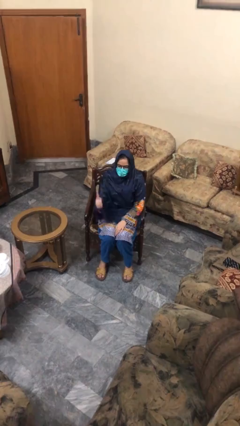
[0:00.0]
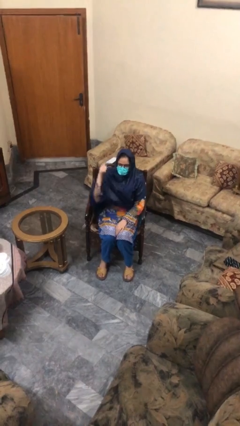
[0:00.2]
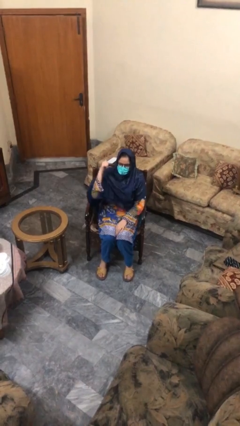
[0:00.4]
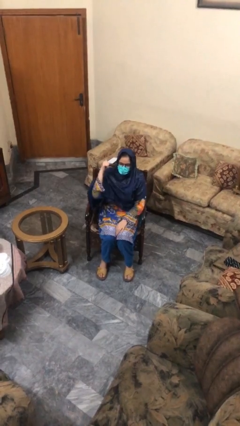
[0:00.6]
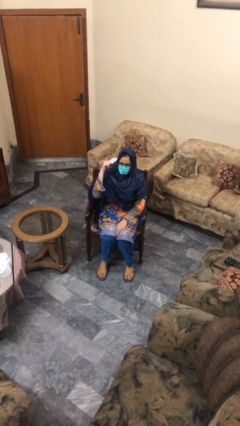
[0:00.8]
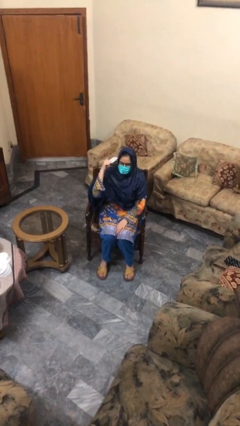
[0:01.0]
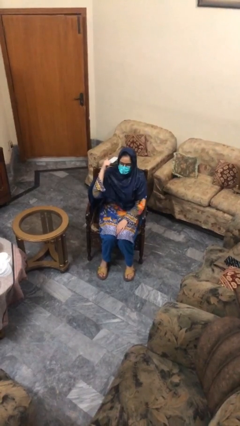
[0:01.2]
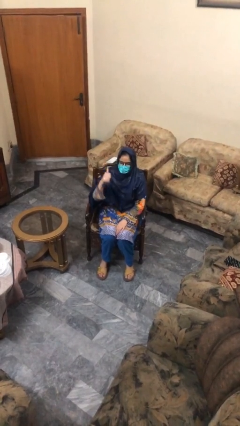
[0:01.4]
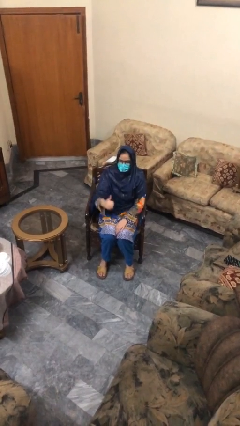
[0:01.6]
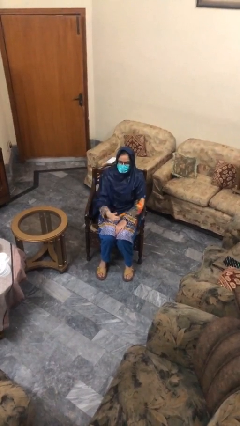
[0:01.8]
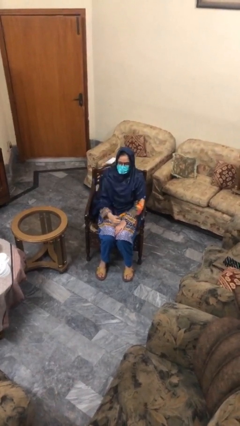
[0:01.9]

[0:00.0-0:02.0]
person gestures behind me

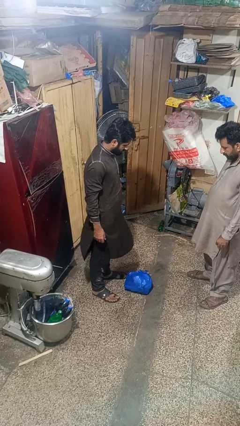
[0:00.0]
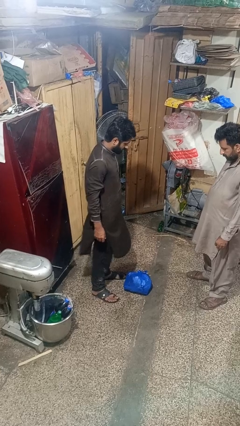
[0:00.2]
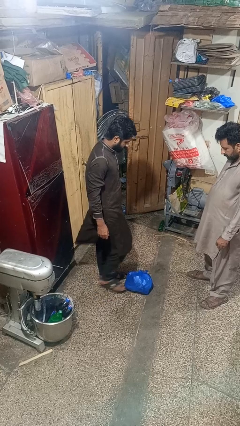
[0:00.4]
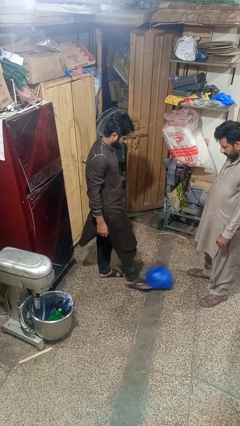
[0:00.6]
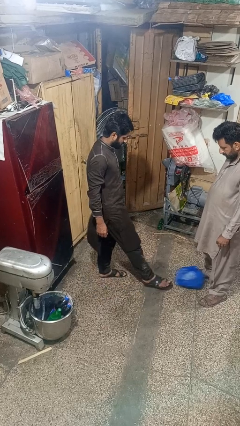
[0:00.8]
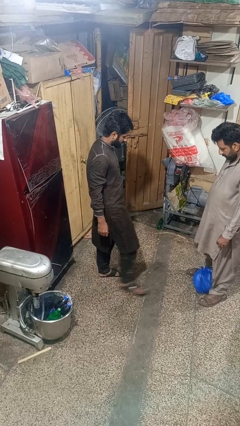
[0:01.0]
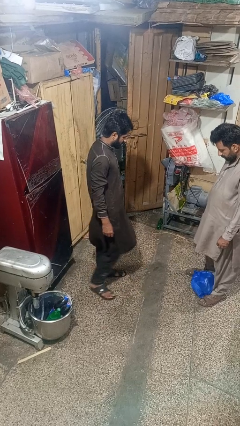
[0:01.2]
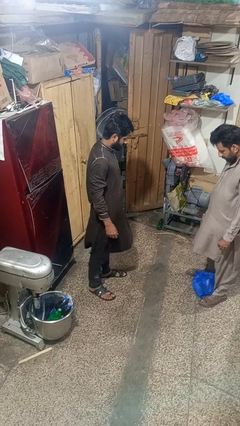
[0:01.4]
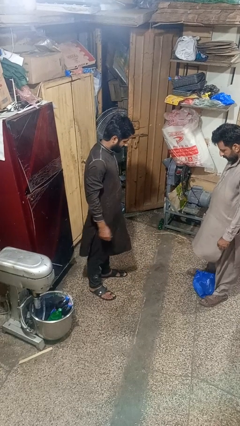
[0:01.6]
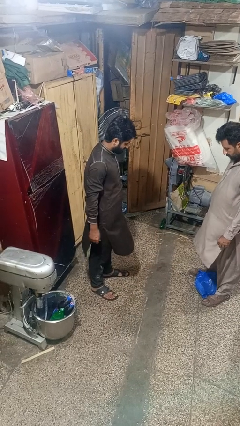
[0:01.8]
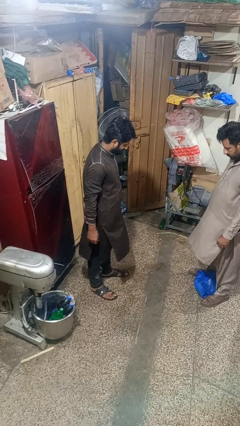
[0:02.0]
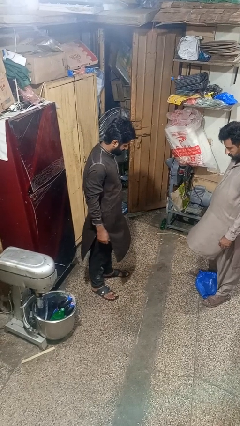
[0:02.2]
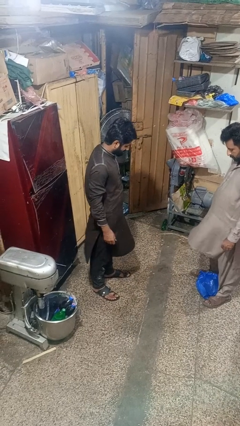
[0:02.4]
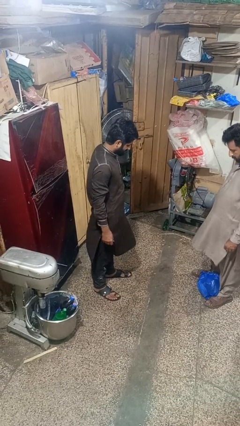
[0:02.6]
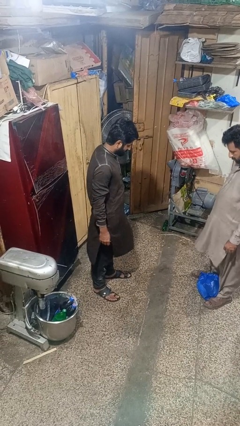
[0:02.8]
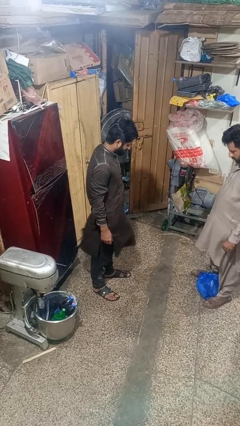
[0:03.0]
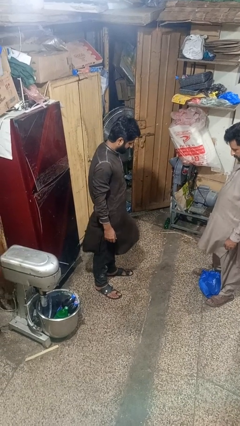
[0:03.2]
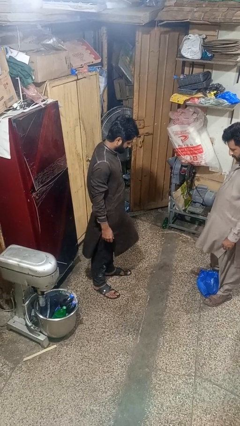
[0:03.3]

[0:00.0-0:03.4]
person kicks object to person

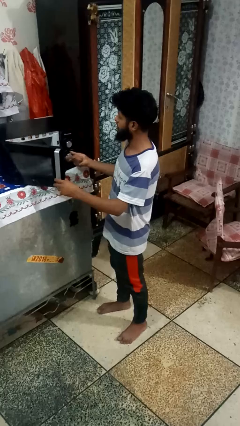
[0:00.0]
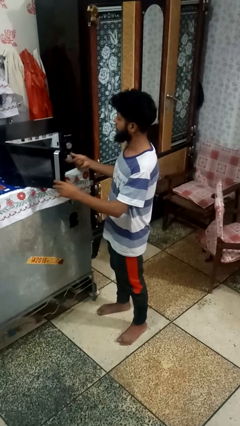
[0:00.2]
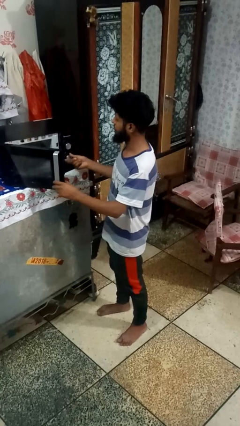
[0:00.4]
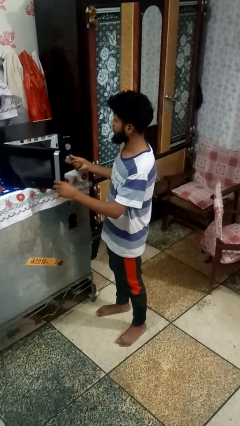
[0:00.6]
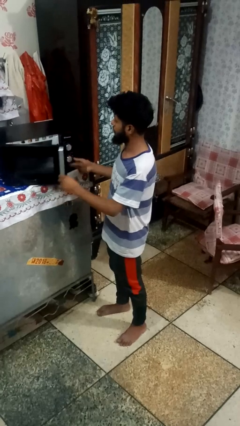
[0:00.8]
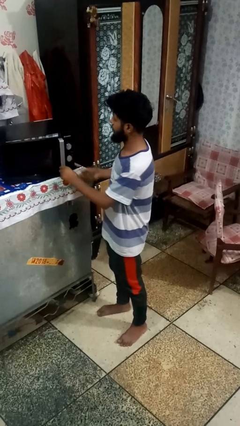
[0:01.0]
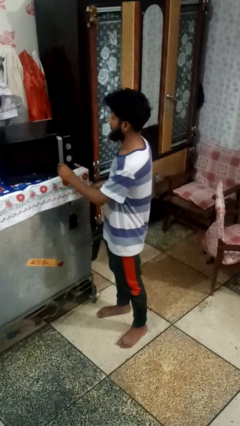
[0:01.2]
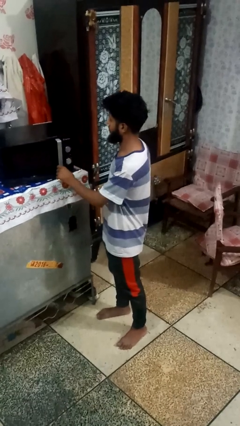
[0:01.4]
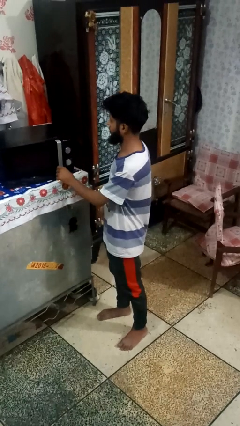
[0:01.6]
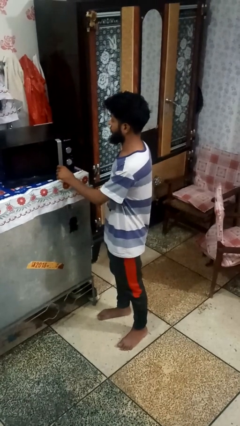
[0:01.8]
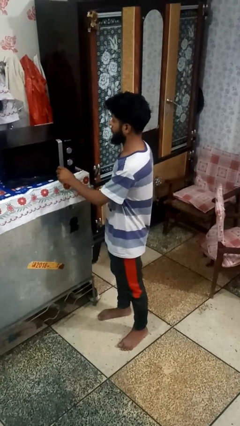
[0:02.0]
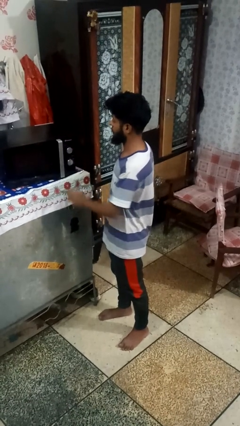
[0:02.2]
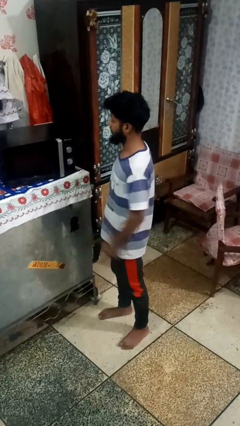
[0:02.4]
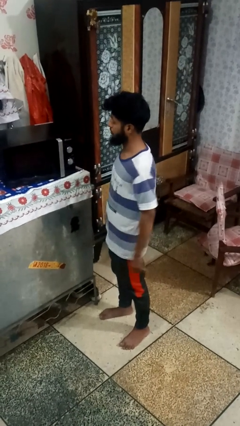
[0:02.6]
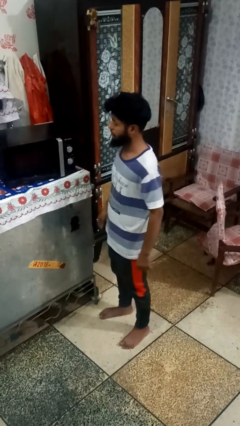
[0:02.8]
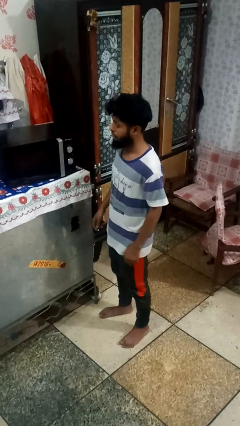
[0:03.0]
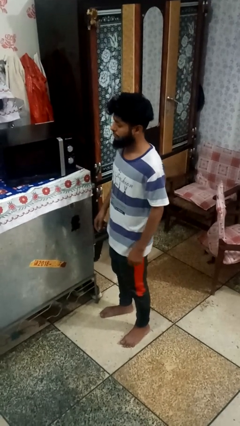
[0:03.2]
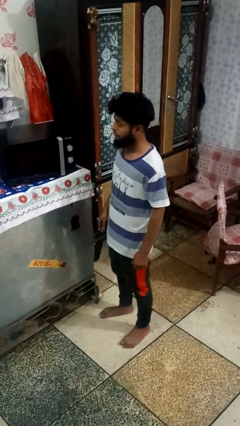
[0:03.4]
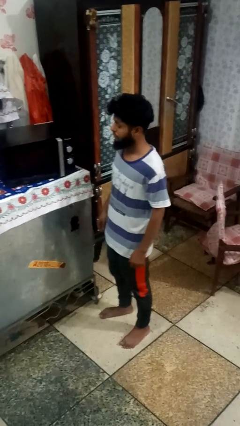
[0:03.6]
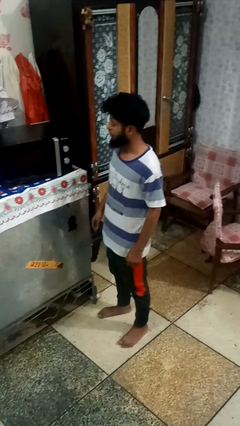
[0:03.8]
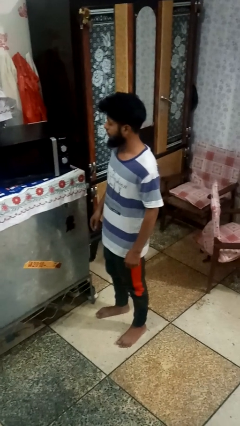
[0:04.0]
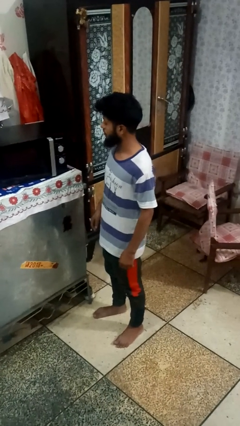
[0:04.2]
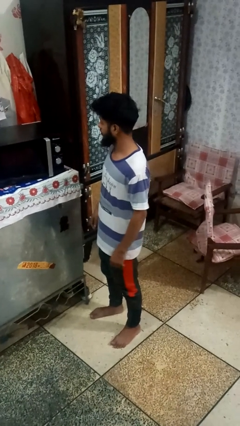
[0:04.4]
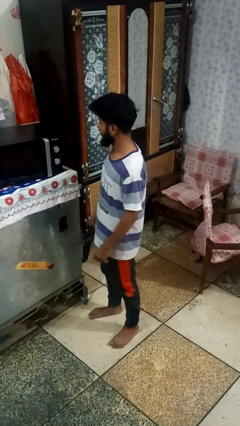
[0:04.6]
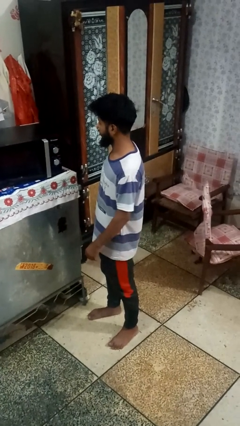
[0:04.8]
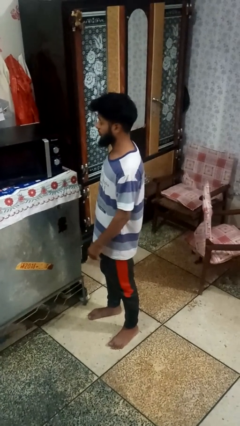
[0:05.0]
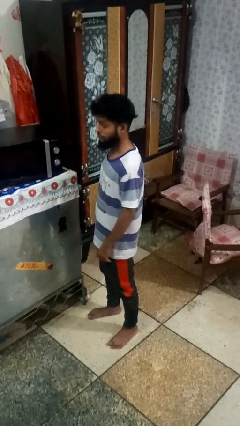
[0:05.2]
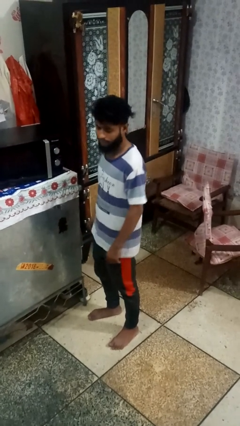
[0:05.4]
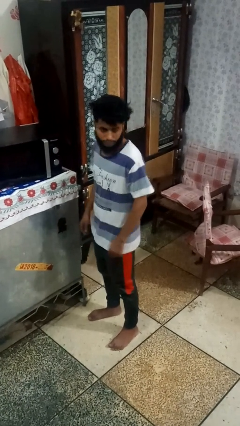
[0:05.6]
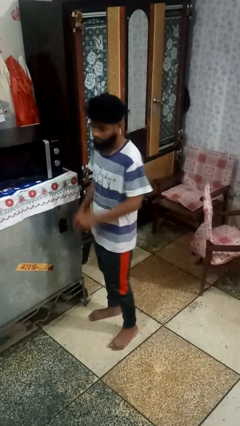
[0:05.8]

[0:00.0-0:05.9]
person closes oven door

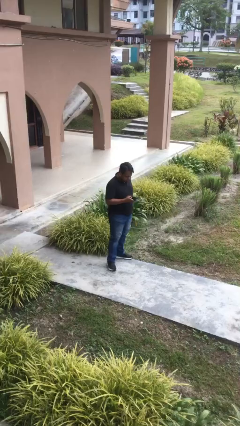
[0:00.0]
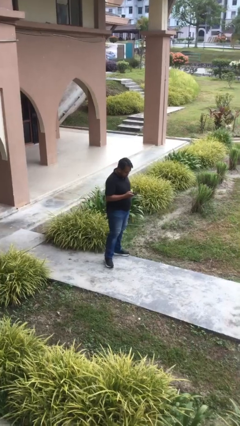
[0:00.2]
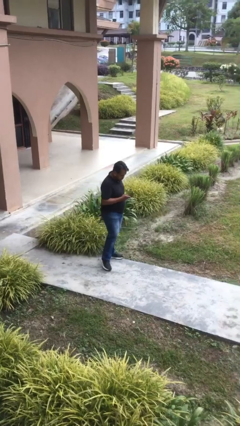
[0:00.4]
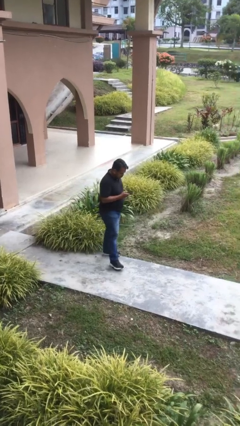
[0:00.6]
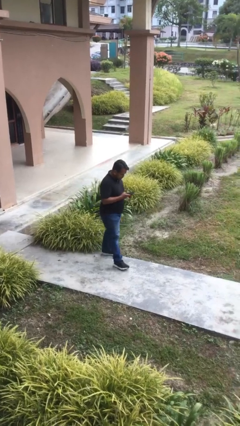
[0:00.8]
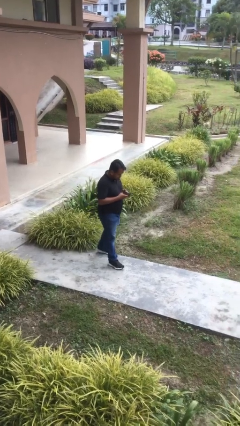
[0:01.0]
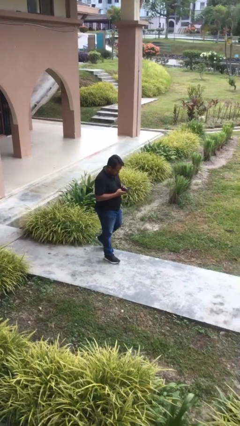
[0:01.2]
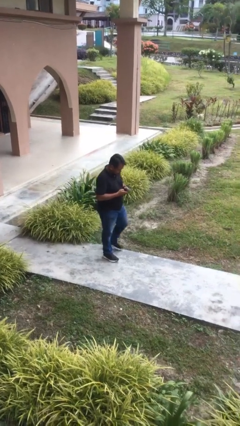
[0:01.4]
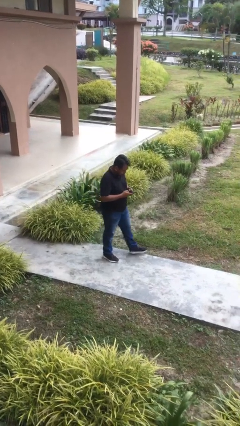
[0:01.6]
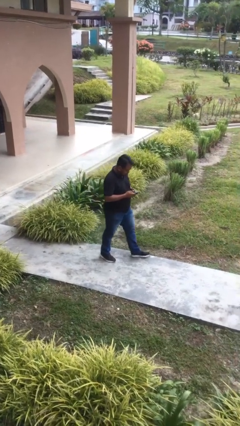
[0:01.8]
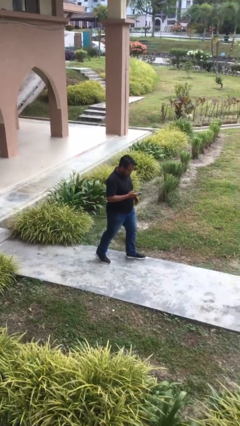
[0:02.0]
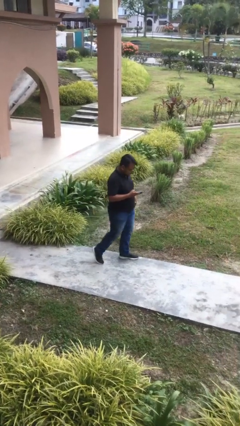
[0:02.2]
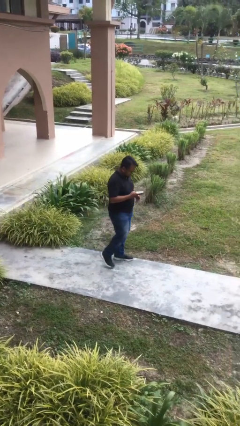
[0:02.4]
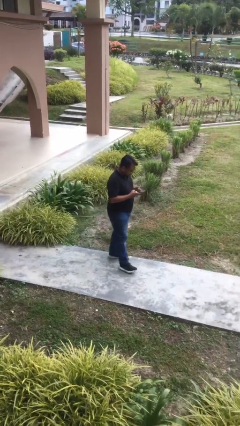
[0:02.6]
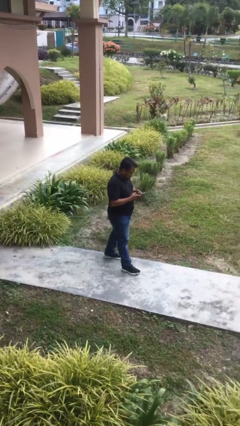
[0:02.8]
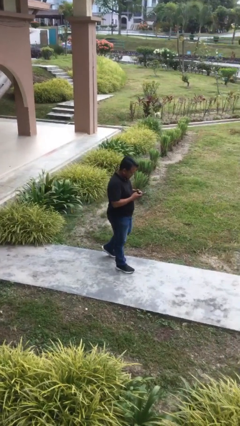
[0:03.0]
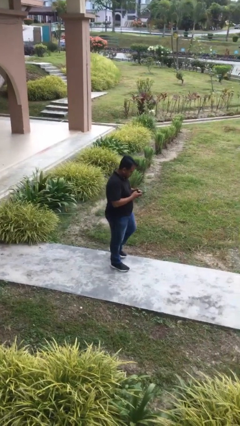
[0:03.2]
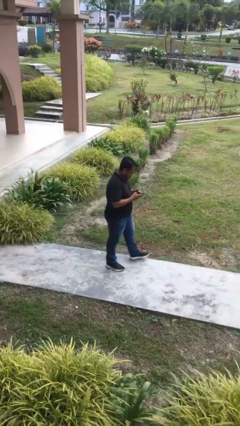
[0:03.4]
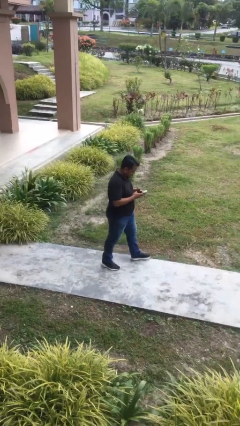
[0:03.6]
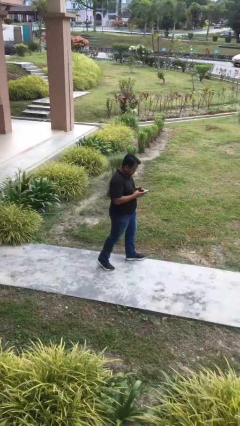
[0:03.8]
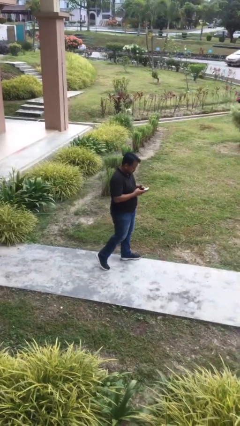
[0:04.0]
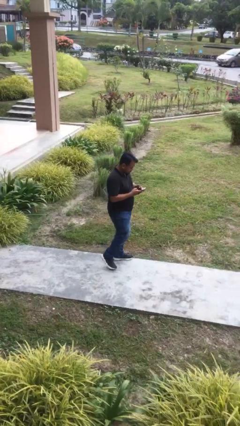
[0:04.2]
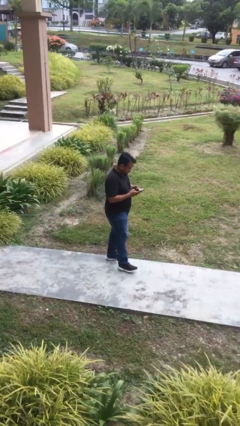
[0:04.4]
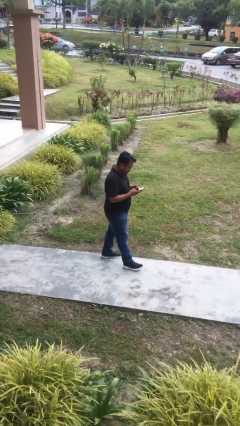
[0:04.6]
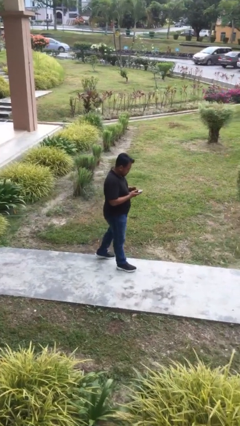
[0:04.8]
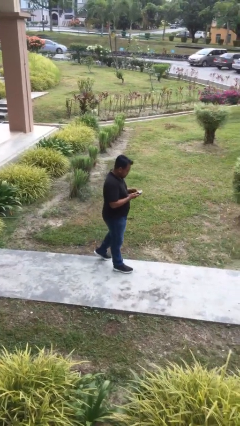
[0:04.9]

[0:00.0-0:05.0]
person texts on phone

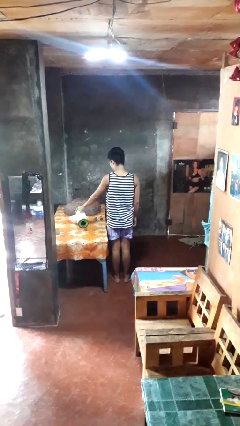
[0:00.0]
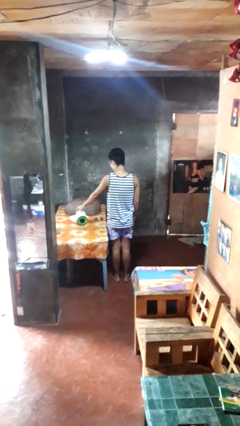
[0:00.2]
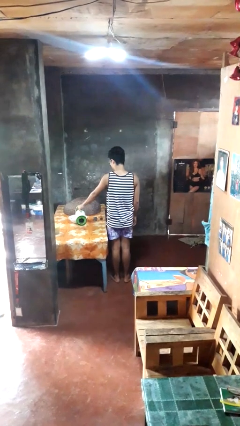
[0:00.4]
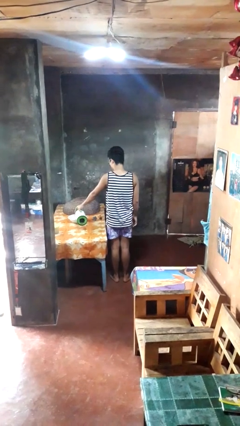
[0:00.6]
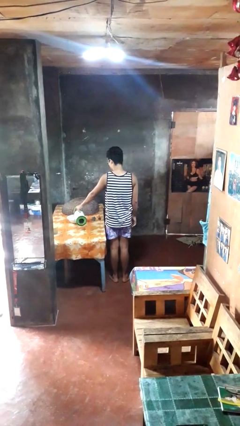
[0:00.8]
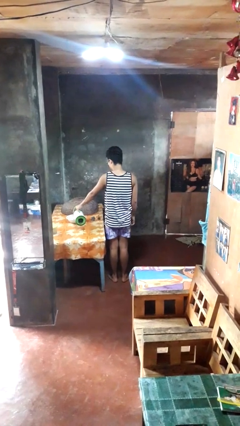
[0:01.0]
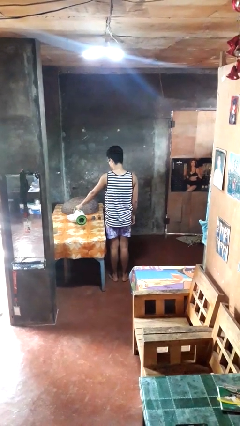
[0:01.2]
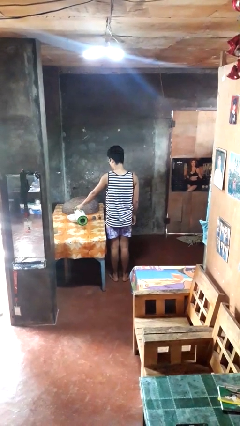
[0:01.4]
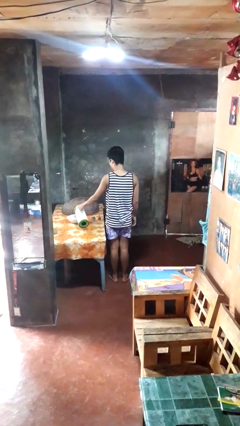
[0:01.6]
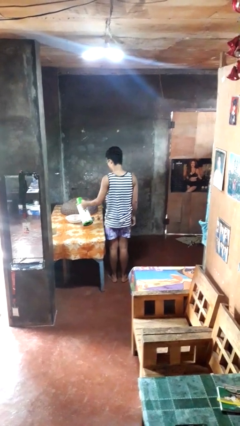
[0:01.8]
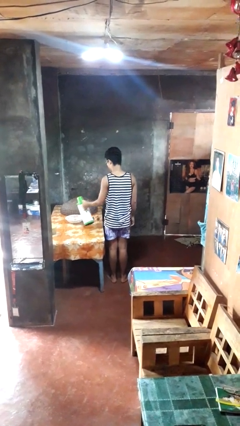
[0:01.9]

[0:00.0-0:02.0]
person pours into bowl
